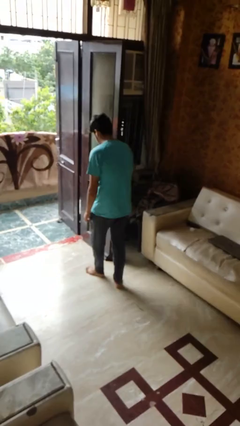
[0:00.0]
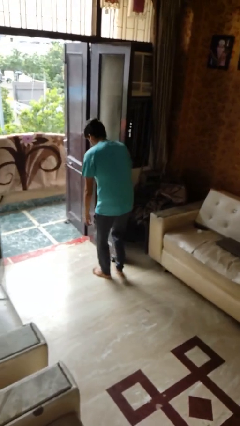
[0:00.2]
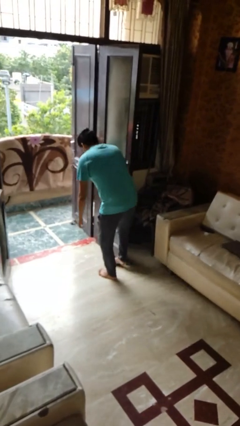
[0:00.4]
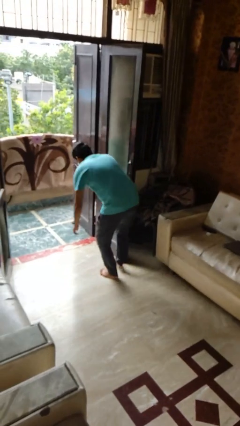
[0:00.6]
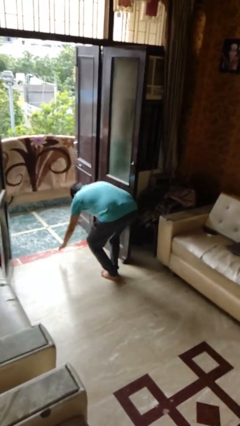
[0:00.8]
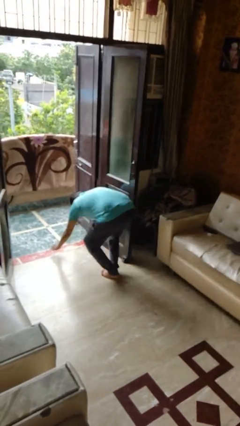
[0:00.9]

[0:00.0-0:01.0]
person trips on object on floor

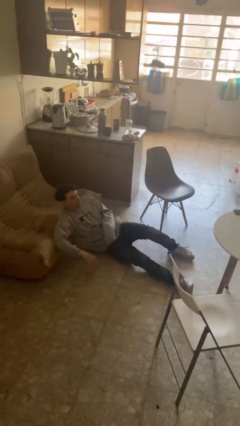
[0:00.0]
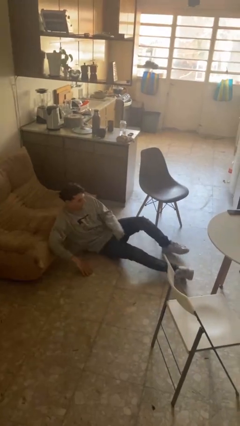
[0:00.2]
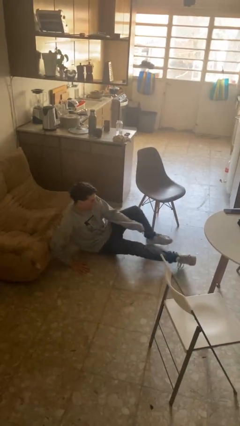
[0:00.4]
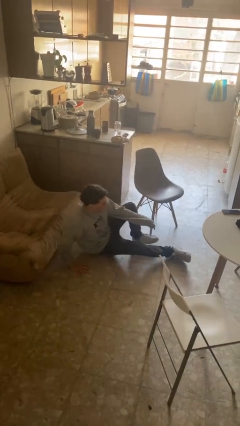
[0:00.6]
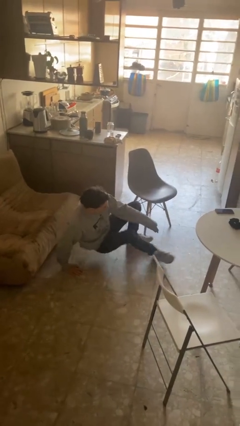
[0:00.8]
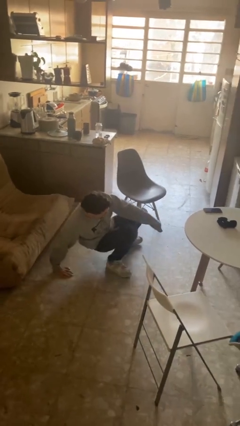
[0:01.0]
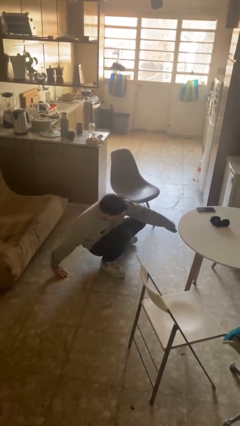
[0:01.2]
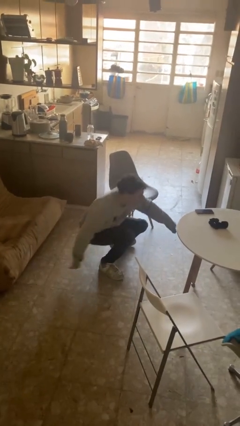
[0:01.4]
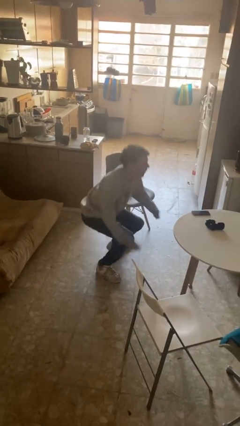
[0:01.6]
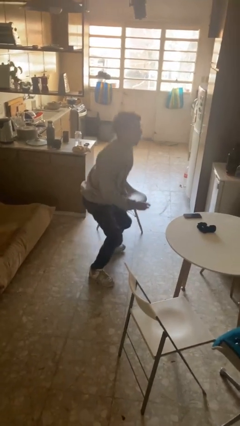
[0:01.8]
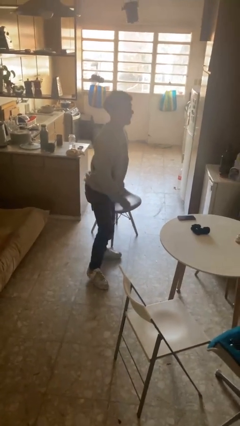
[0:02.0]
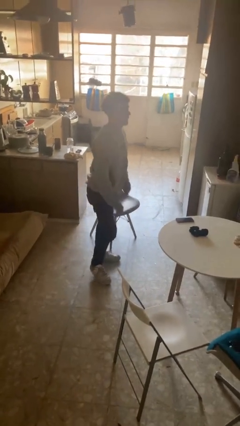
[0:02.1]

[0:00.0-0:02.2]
person stands up from floor

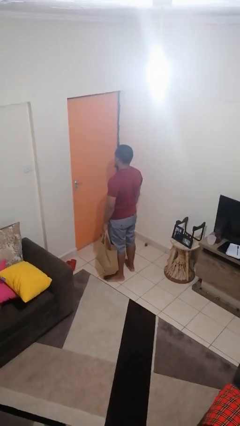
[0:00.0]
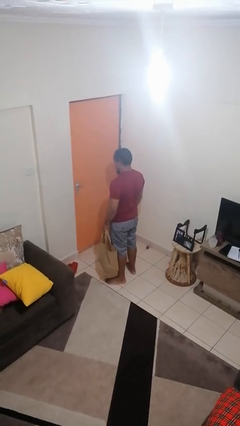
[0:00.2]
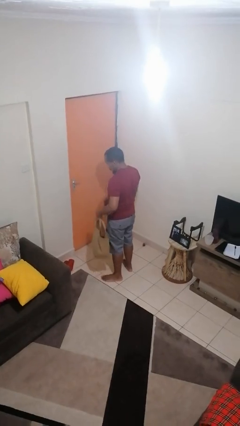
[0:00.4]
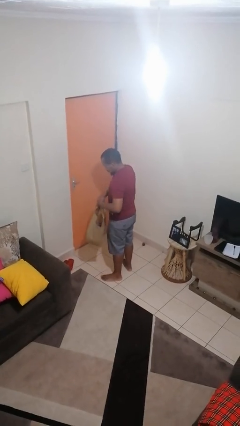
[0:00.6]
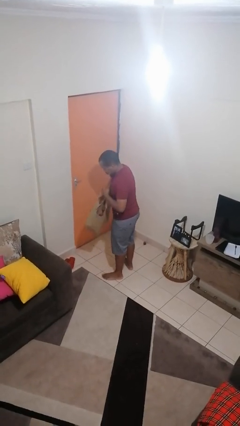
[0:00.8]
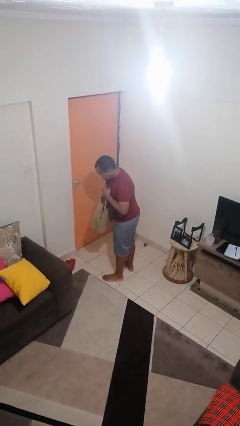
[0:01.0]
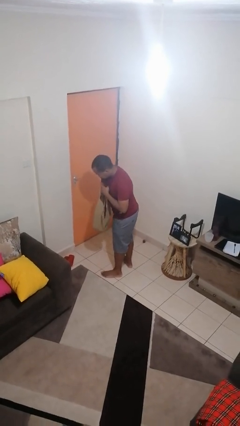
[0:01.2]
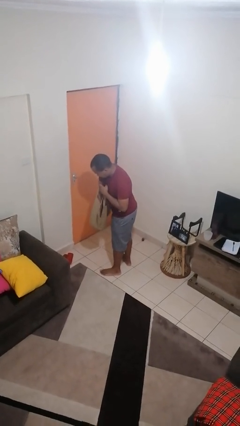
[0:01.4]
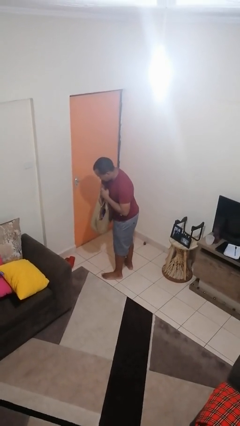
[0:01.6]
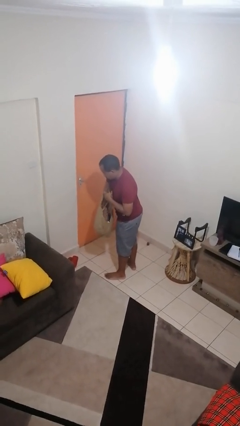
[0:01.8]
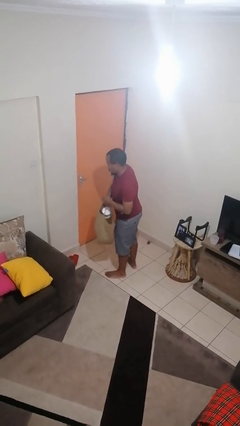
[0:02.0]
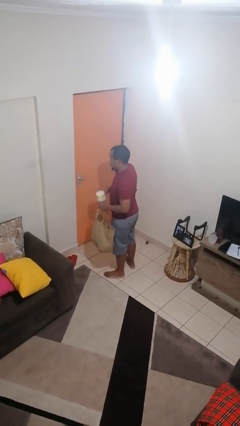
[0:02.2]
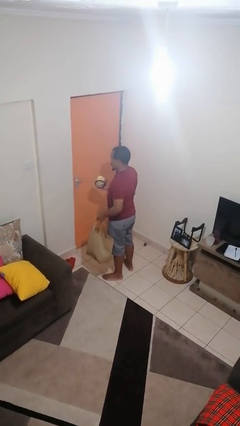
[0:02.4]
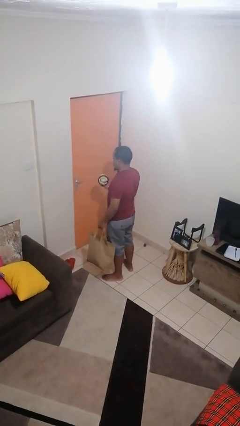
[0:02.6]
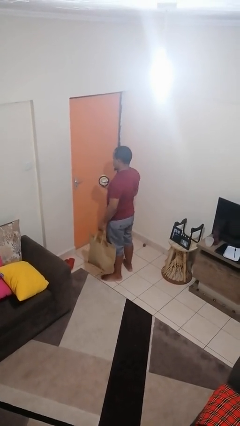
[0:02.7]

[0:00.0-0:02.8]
person takes object from bag

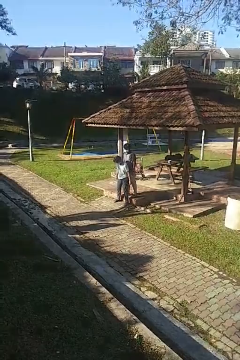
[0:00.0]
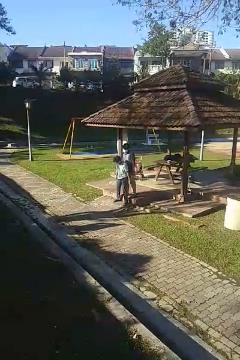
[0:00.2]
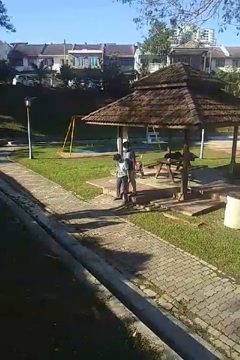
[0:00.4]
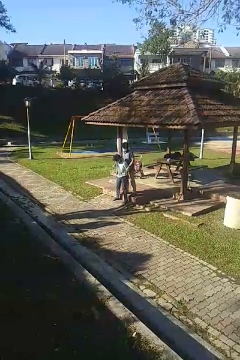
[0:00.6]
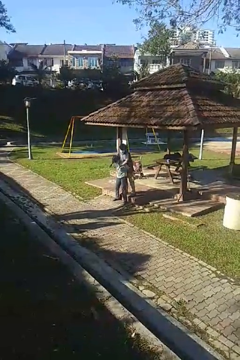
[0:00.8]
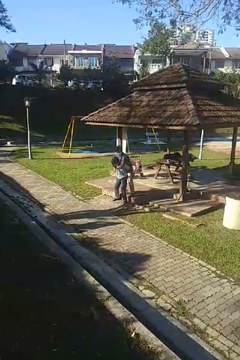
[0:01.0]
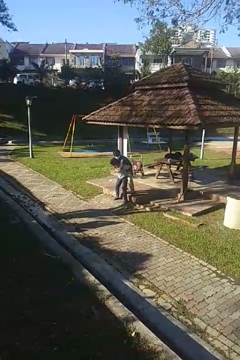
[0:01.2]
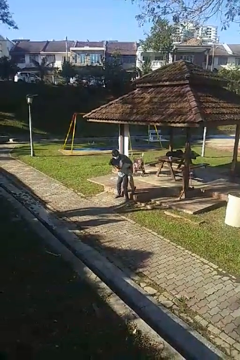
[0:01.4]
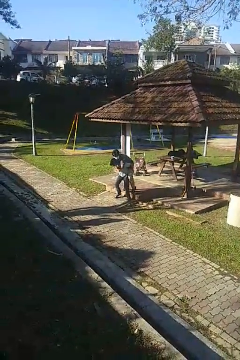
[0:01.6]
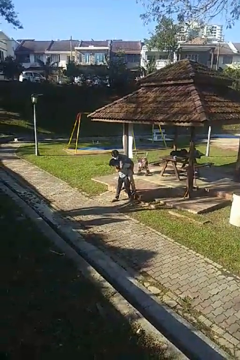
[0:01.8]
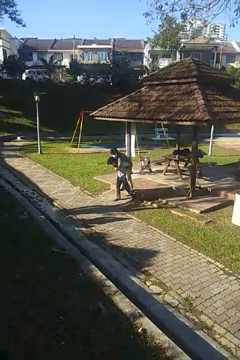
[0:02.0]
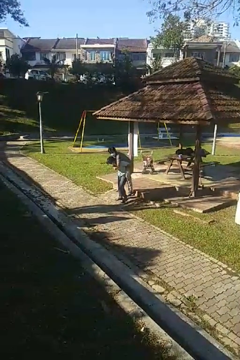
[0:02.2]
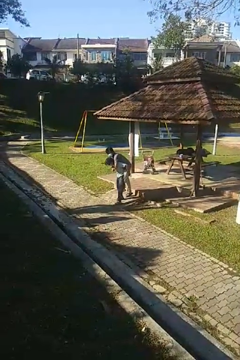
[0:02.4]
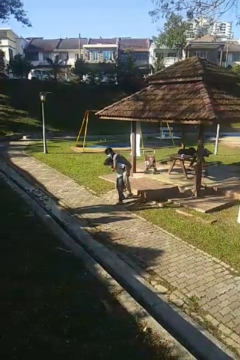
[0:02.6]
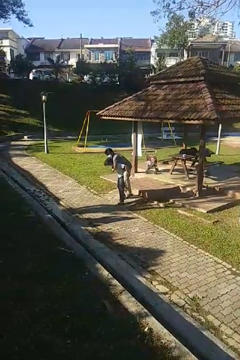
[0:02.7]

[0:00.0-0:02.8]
person carries person over shoulder

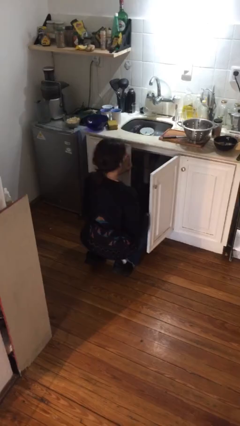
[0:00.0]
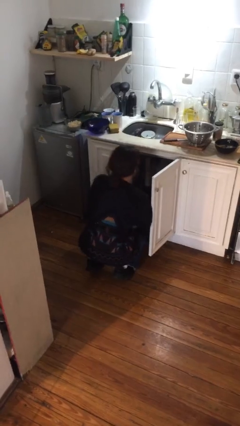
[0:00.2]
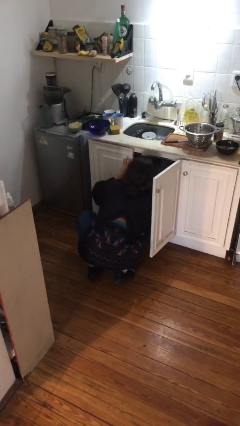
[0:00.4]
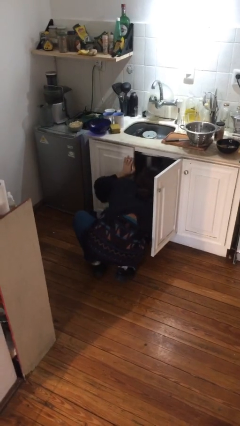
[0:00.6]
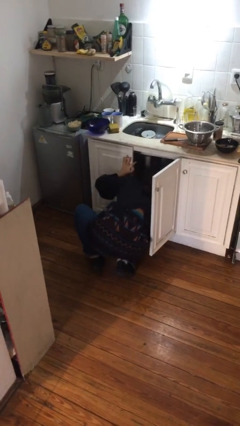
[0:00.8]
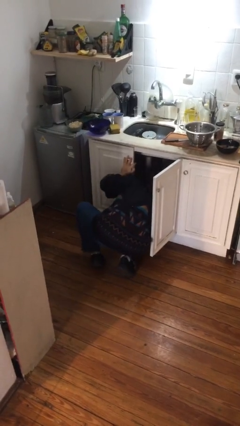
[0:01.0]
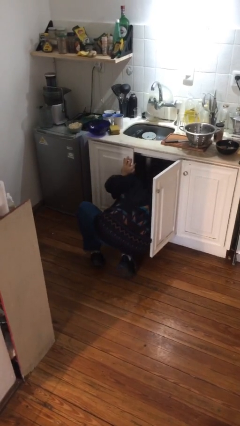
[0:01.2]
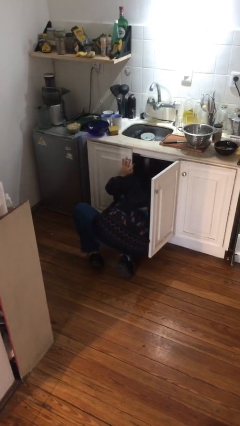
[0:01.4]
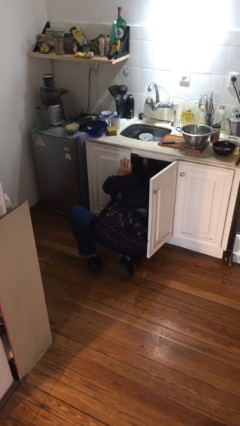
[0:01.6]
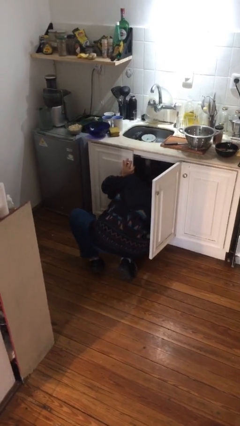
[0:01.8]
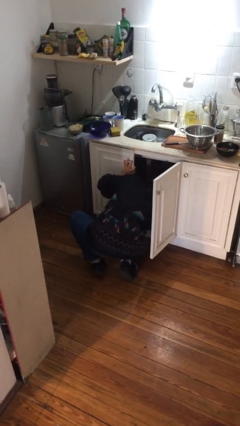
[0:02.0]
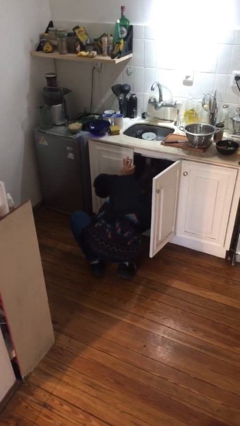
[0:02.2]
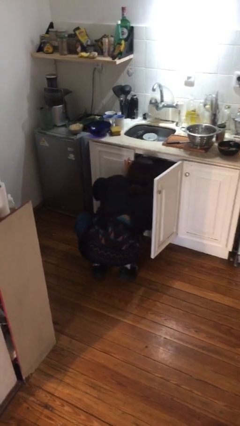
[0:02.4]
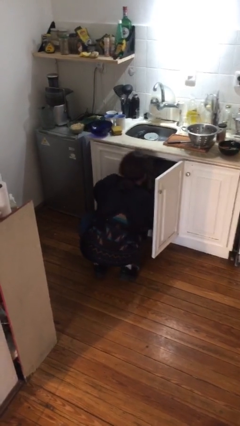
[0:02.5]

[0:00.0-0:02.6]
person searches in cabinet

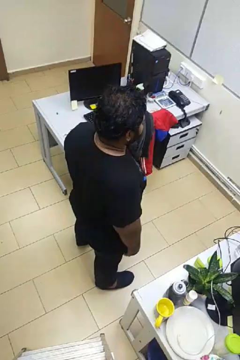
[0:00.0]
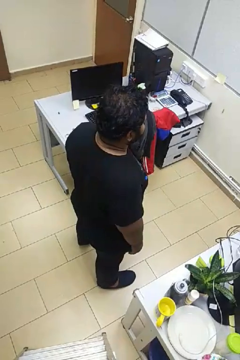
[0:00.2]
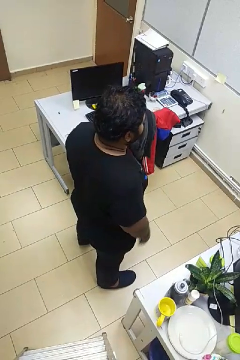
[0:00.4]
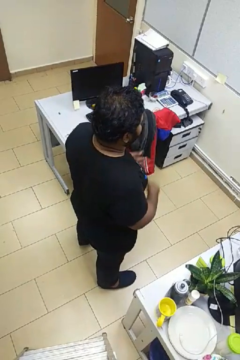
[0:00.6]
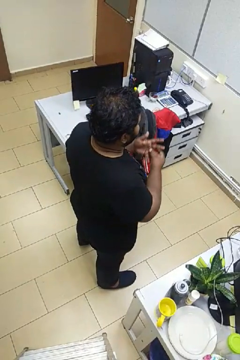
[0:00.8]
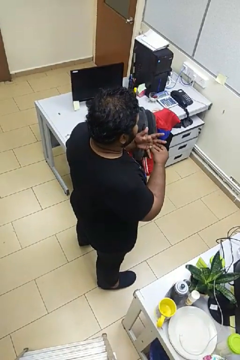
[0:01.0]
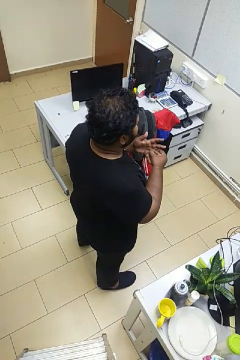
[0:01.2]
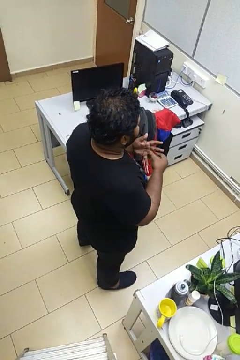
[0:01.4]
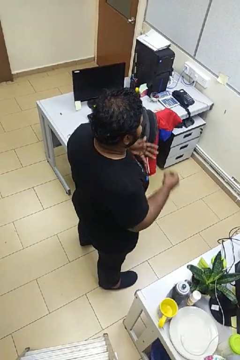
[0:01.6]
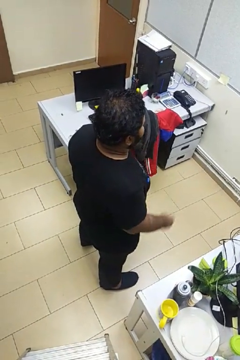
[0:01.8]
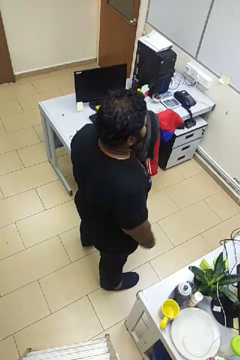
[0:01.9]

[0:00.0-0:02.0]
person takes off ring

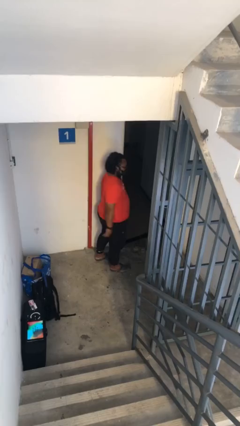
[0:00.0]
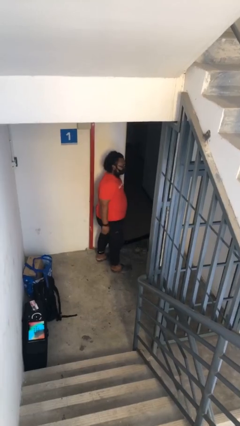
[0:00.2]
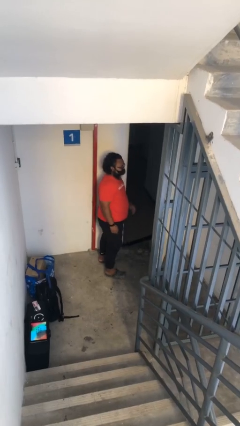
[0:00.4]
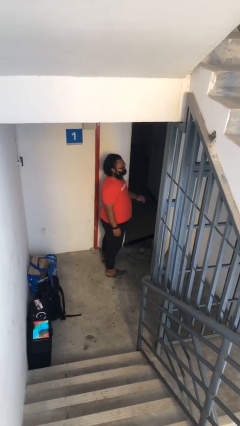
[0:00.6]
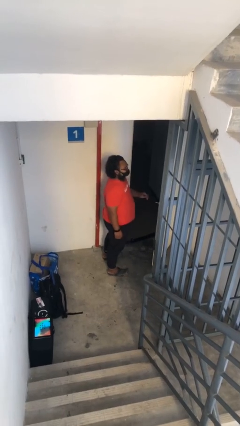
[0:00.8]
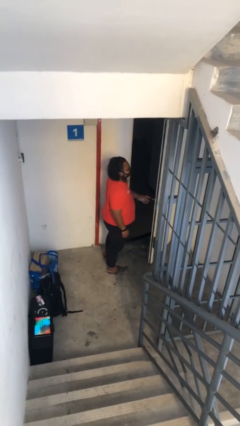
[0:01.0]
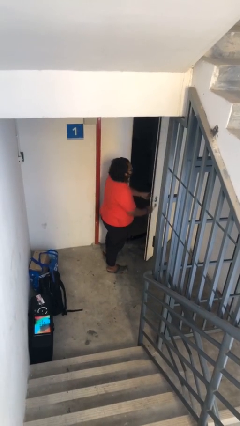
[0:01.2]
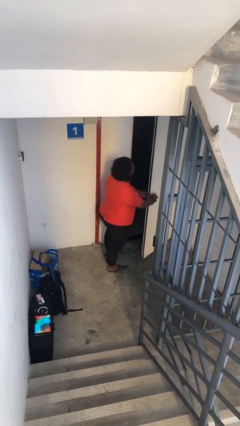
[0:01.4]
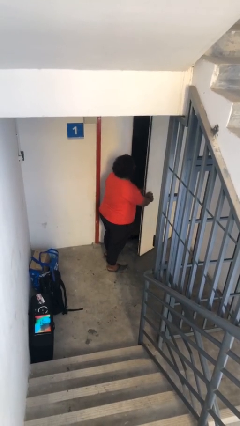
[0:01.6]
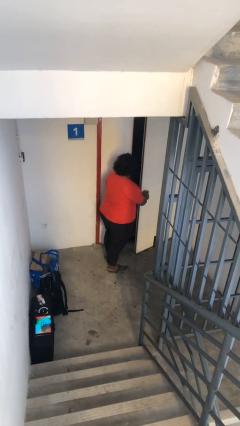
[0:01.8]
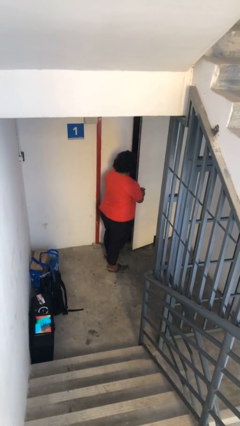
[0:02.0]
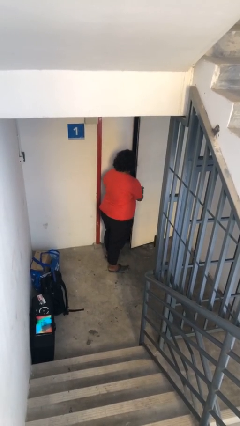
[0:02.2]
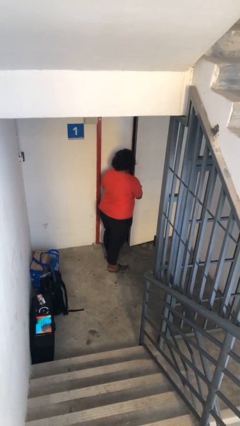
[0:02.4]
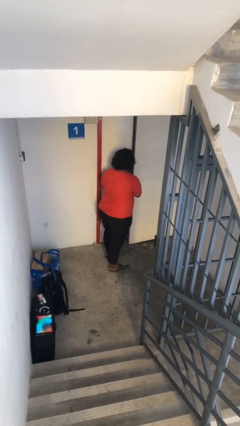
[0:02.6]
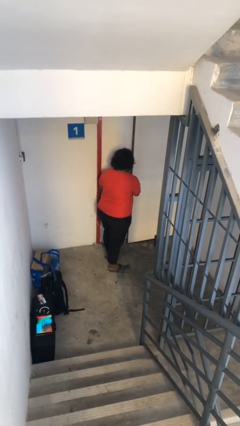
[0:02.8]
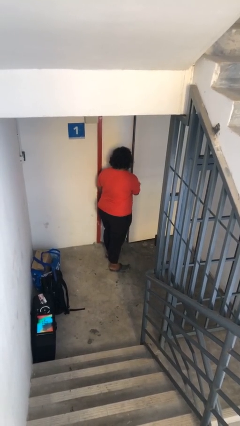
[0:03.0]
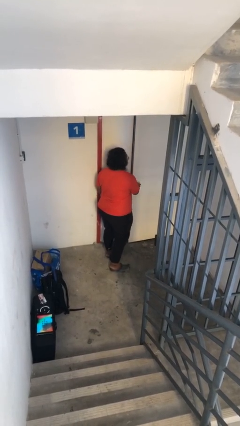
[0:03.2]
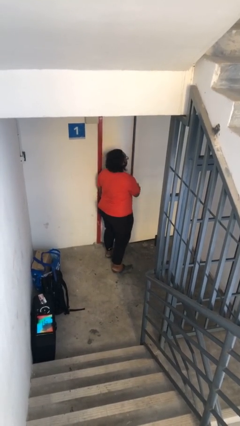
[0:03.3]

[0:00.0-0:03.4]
person closes facility door

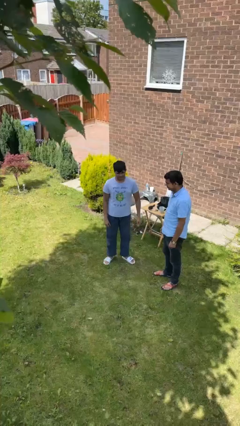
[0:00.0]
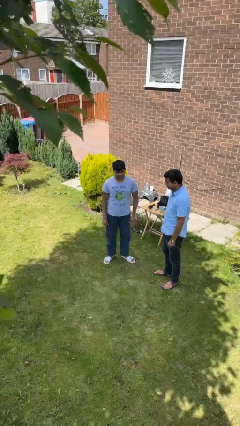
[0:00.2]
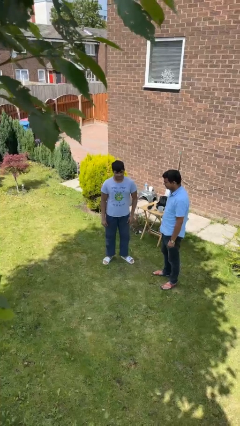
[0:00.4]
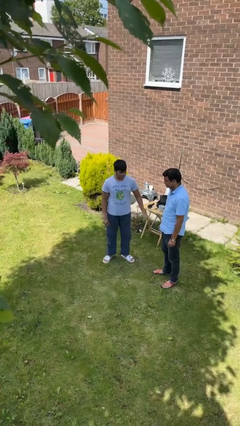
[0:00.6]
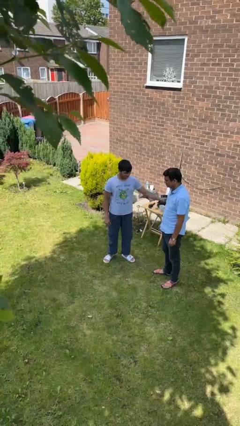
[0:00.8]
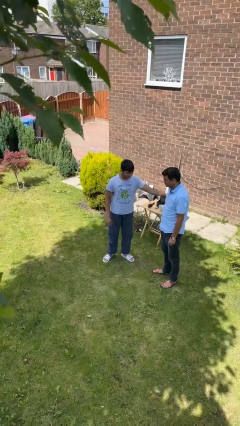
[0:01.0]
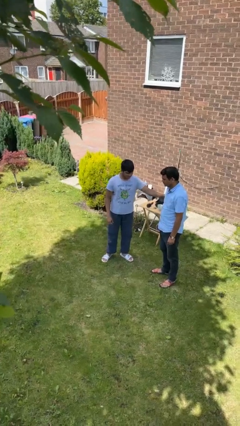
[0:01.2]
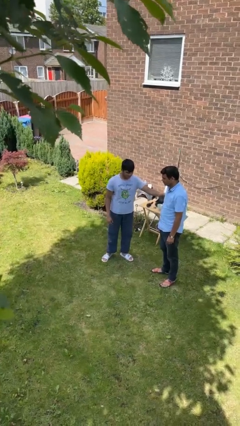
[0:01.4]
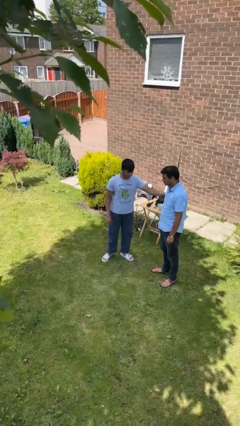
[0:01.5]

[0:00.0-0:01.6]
person grabs person by bicep
